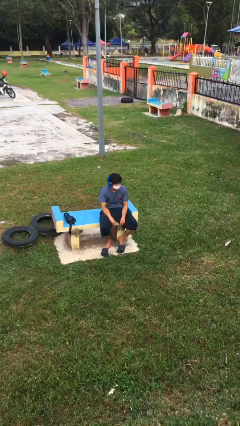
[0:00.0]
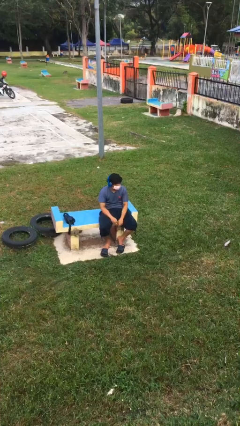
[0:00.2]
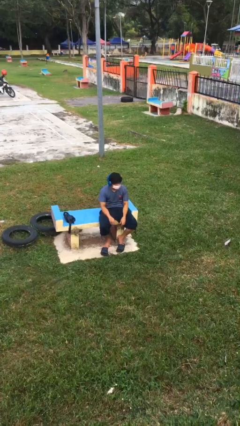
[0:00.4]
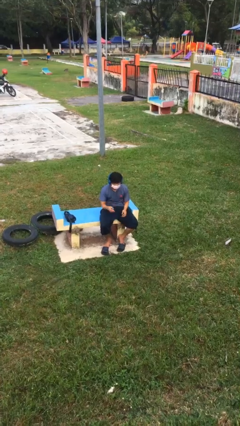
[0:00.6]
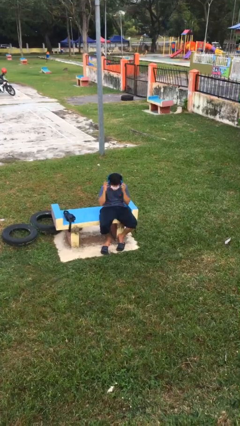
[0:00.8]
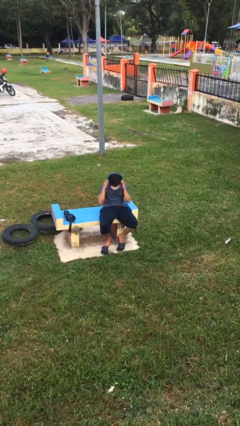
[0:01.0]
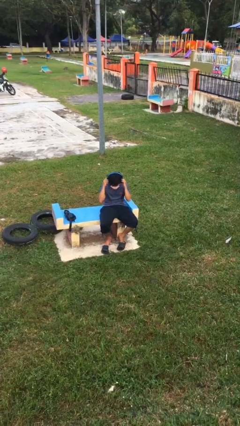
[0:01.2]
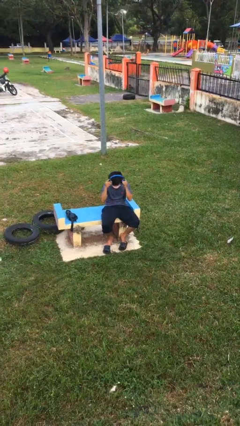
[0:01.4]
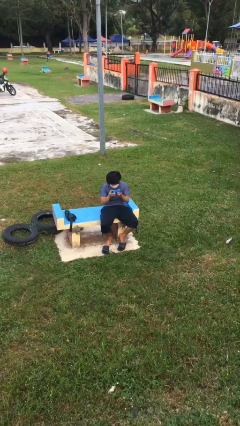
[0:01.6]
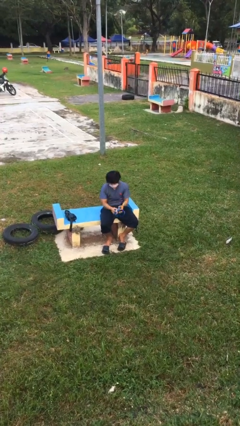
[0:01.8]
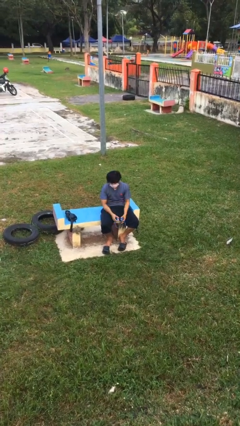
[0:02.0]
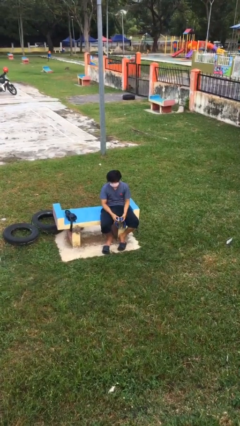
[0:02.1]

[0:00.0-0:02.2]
person takes off headphones

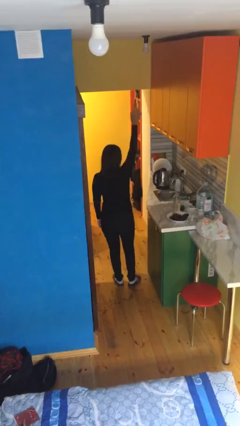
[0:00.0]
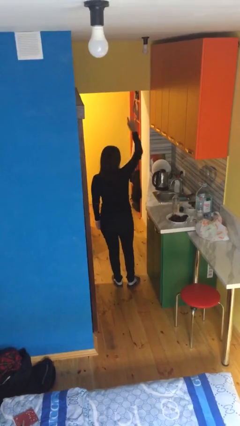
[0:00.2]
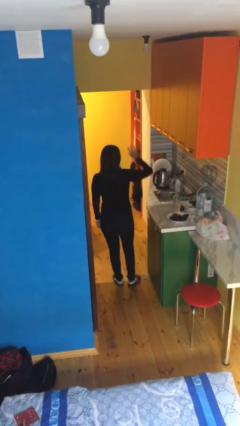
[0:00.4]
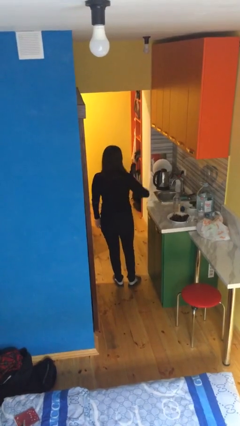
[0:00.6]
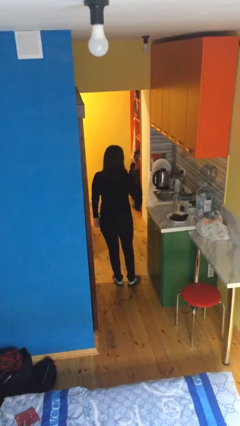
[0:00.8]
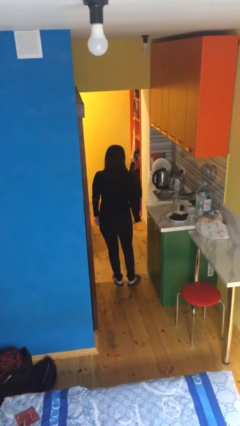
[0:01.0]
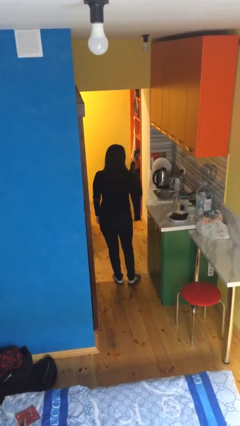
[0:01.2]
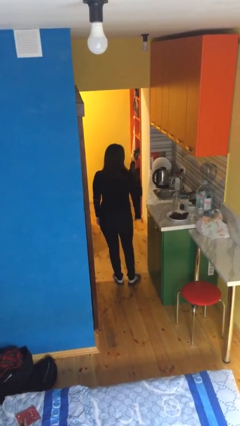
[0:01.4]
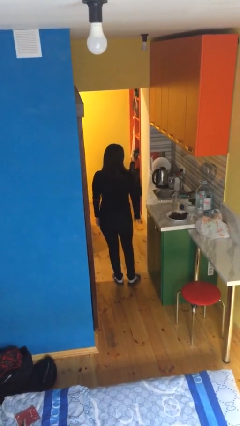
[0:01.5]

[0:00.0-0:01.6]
person gestures swipe down

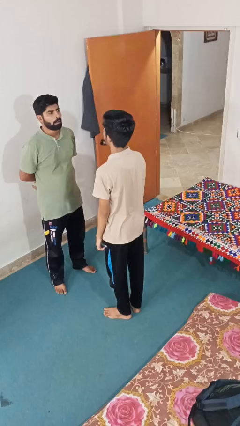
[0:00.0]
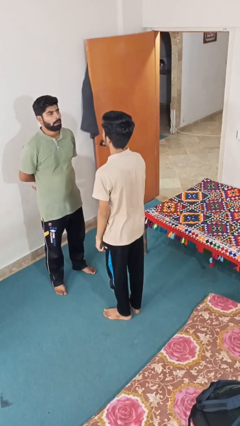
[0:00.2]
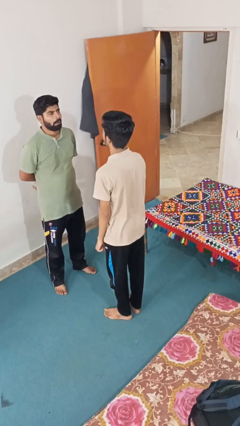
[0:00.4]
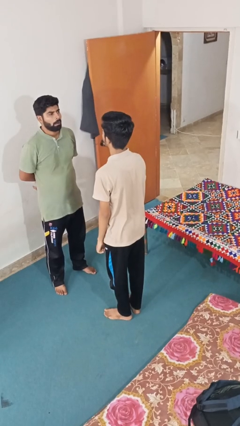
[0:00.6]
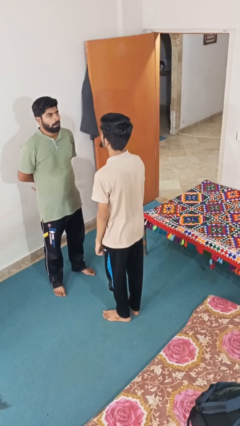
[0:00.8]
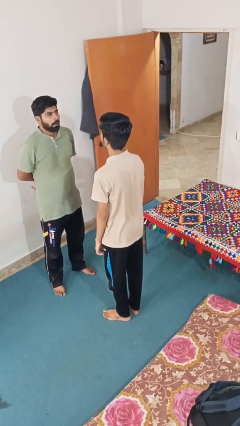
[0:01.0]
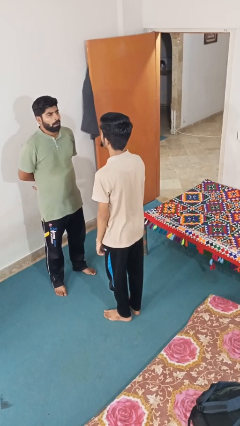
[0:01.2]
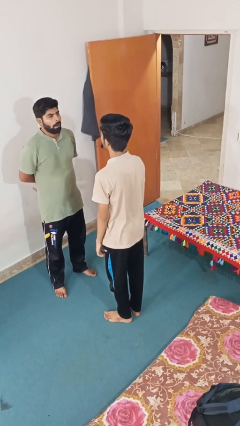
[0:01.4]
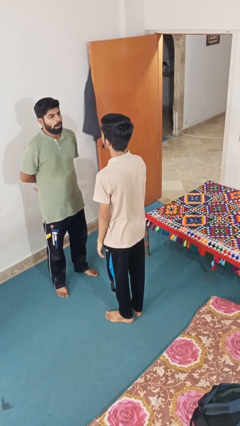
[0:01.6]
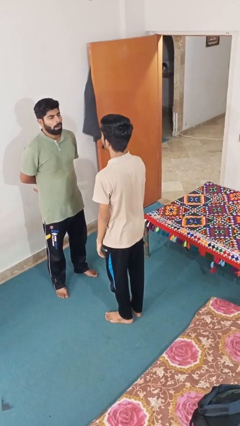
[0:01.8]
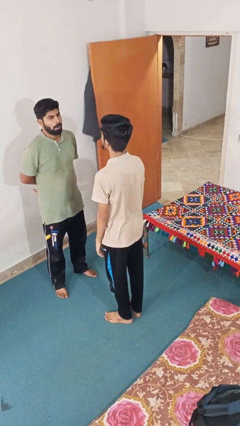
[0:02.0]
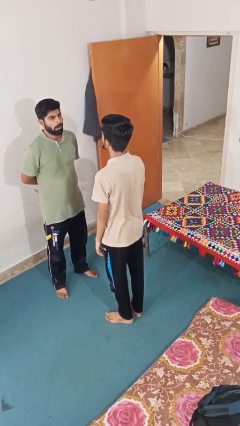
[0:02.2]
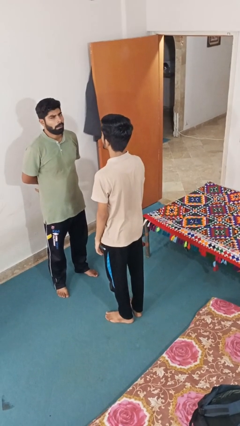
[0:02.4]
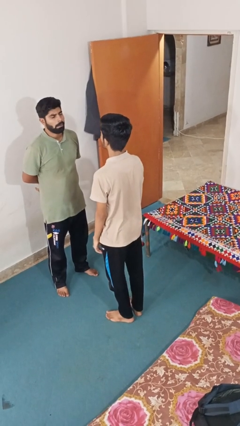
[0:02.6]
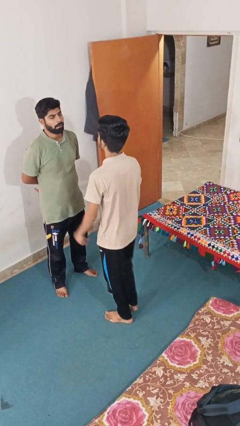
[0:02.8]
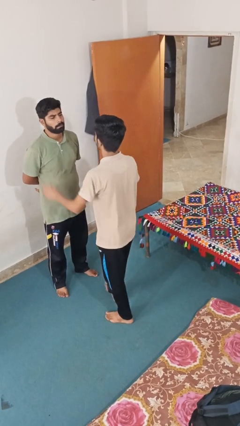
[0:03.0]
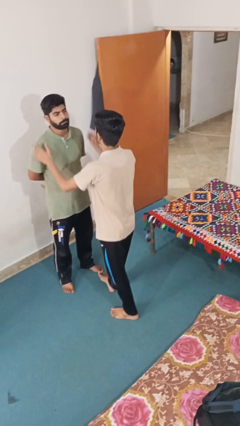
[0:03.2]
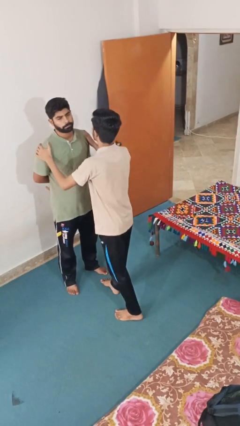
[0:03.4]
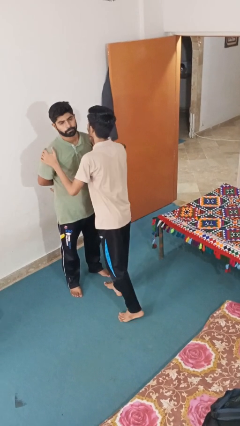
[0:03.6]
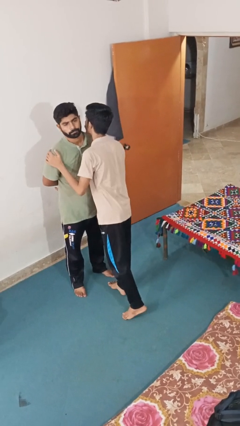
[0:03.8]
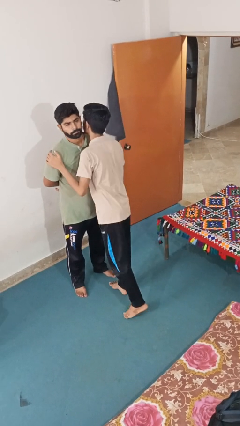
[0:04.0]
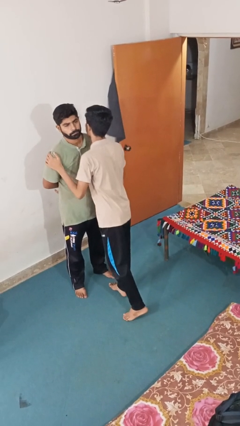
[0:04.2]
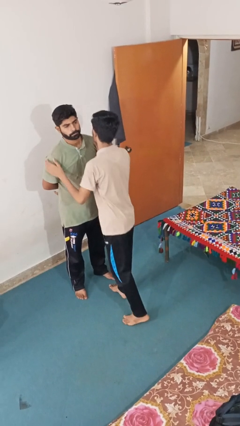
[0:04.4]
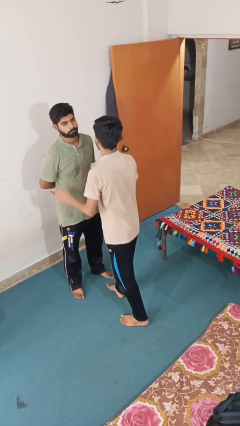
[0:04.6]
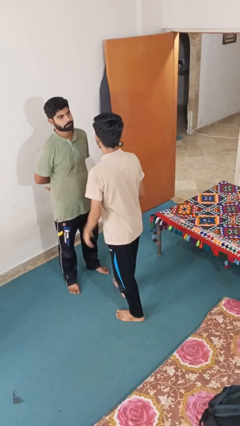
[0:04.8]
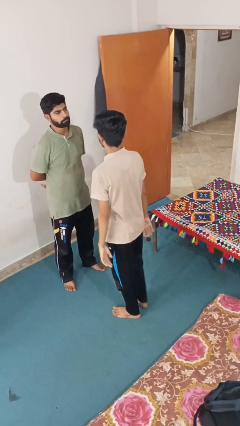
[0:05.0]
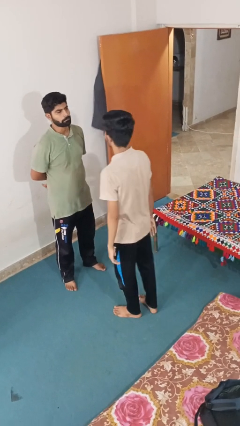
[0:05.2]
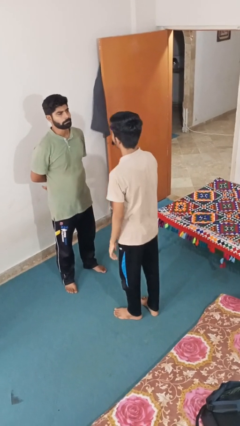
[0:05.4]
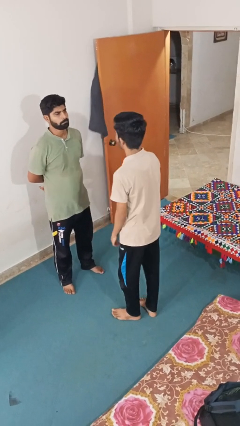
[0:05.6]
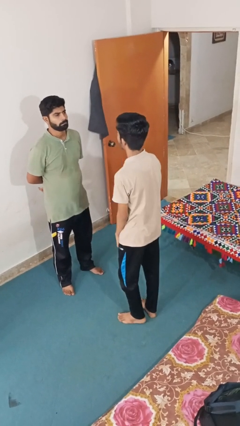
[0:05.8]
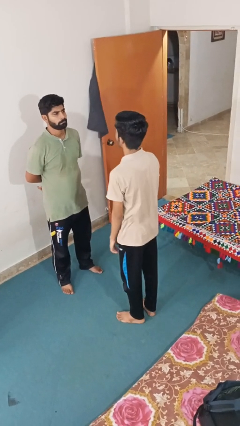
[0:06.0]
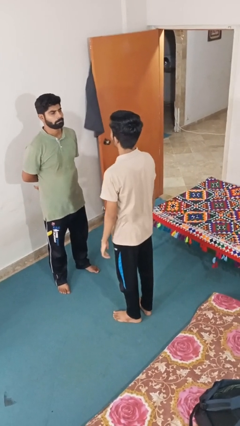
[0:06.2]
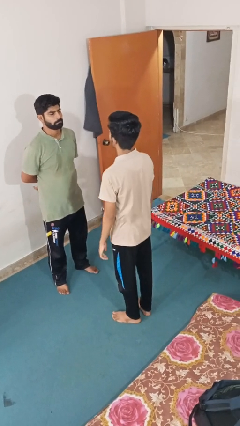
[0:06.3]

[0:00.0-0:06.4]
person kisses cheek of person

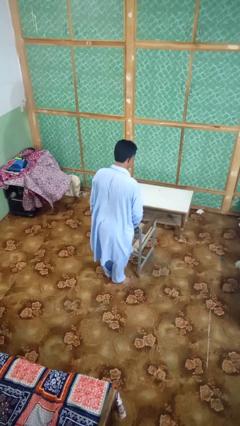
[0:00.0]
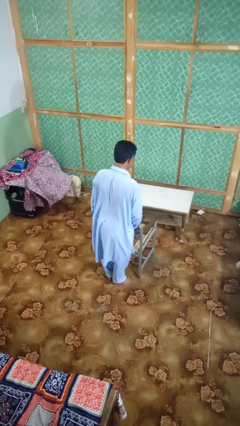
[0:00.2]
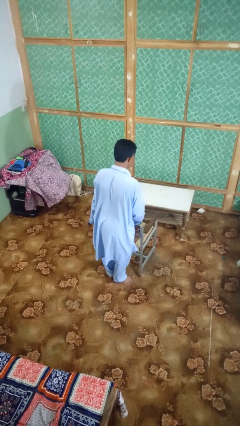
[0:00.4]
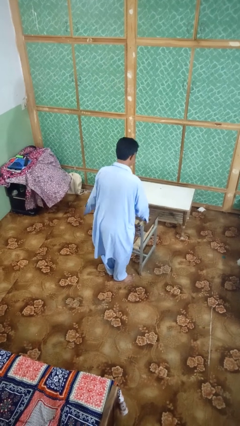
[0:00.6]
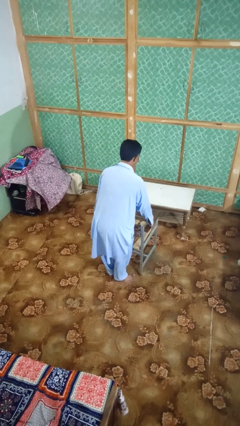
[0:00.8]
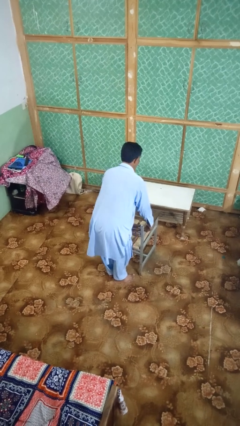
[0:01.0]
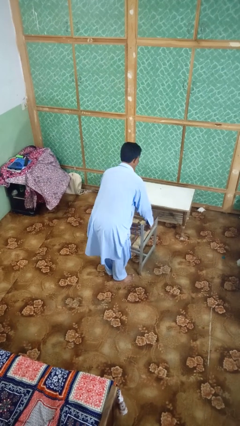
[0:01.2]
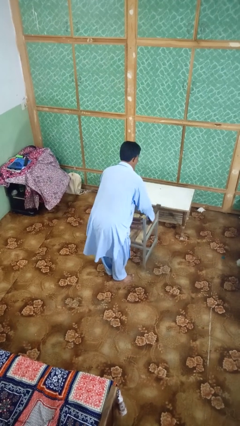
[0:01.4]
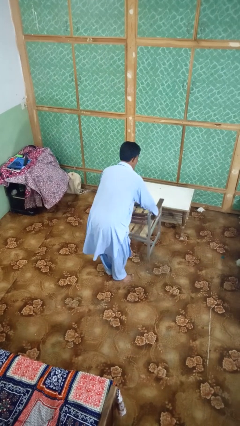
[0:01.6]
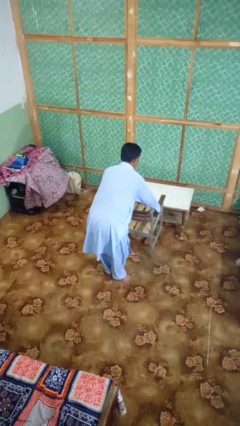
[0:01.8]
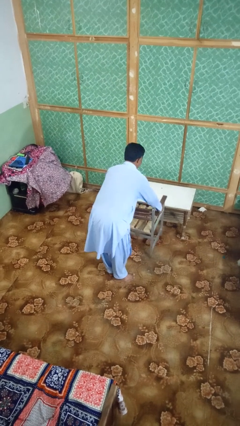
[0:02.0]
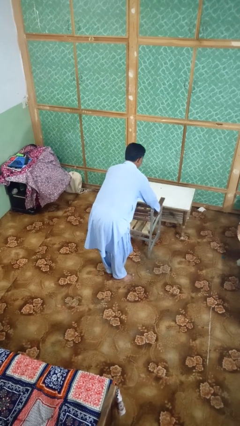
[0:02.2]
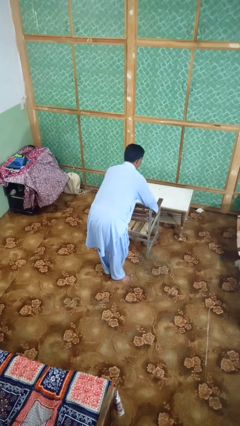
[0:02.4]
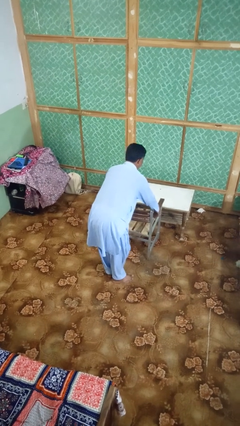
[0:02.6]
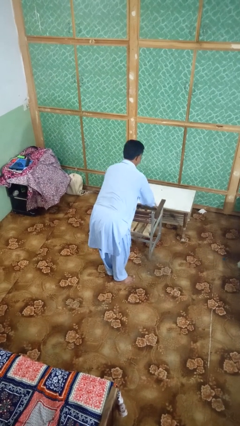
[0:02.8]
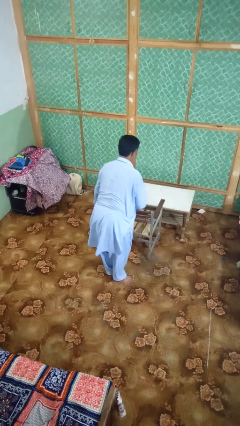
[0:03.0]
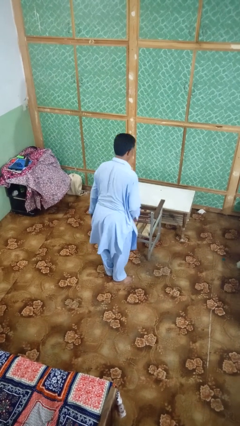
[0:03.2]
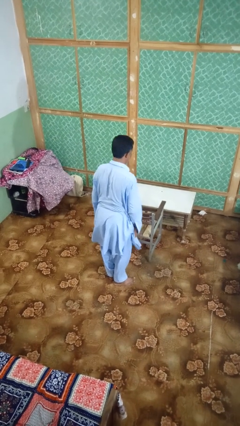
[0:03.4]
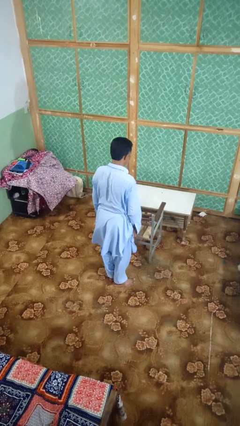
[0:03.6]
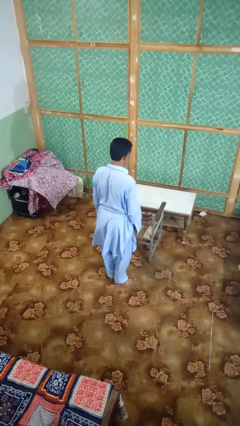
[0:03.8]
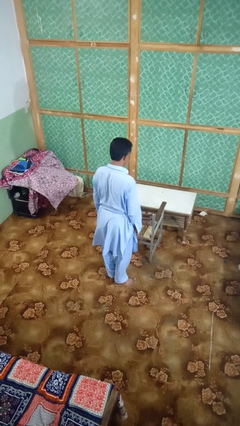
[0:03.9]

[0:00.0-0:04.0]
person pushes in chair

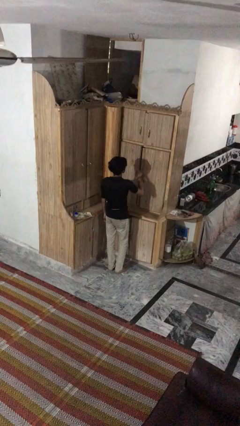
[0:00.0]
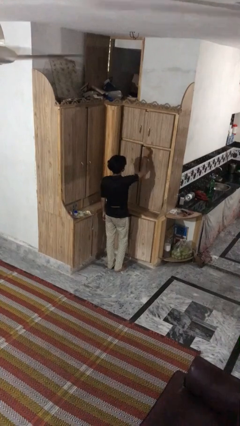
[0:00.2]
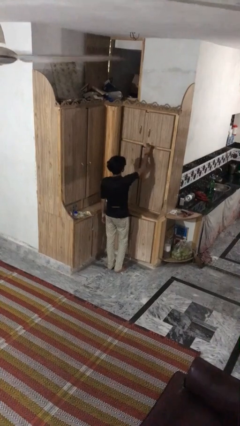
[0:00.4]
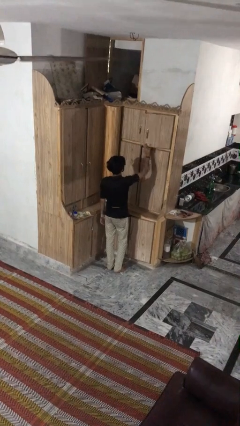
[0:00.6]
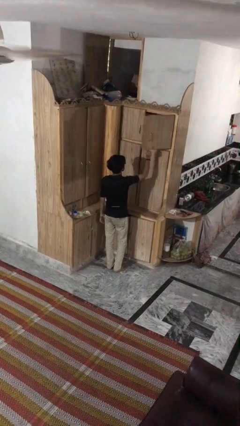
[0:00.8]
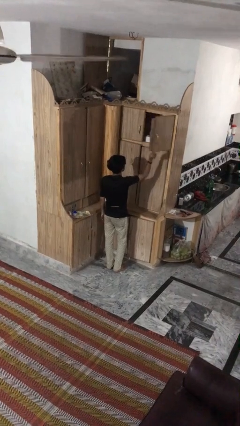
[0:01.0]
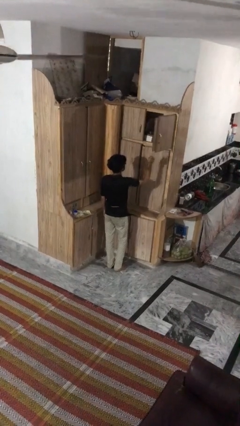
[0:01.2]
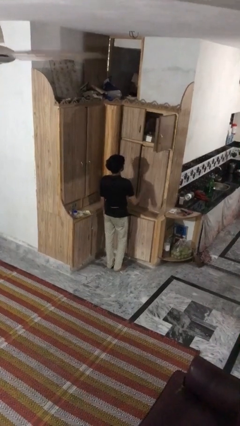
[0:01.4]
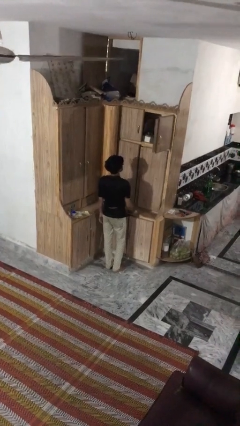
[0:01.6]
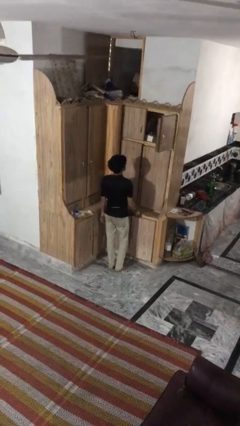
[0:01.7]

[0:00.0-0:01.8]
person opens cabinet

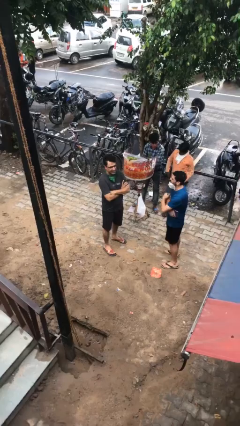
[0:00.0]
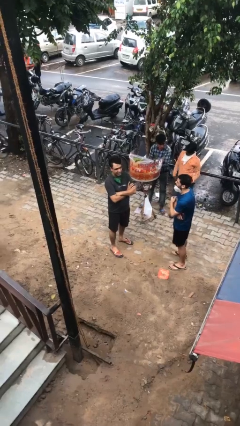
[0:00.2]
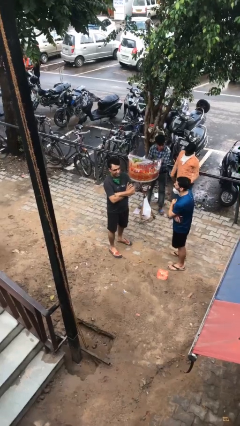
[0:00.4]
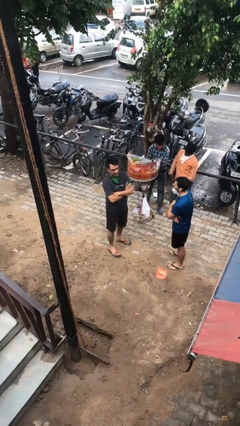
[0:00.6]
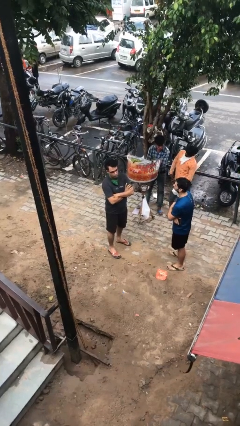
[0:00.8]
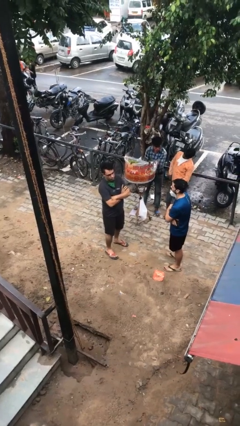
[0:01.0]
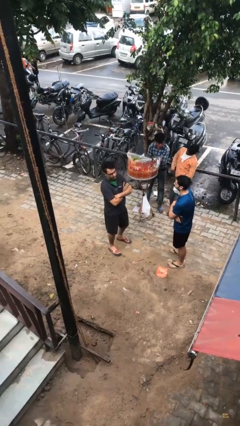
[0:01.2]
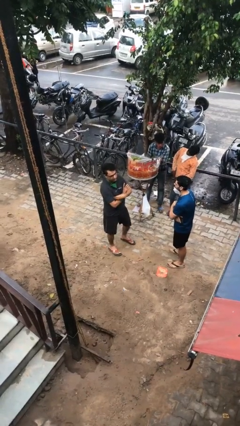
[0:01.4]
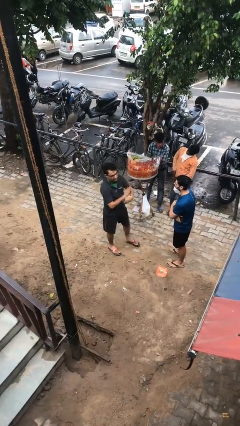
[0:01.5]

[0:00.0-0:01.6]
person laughs with person
